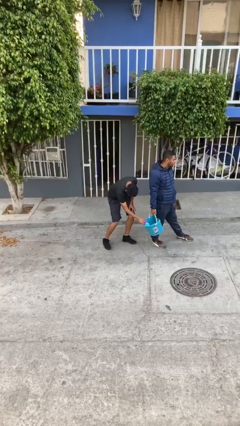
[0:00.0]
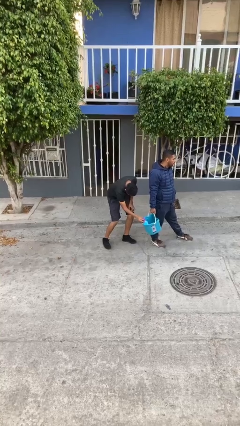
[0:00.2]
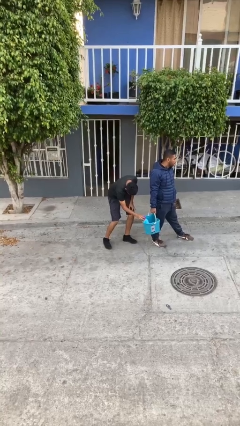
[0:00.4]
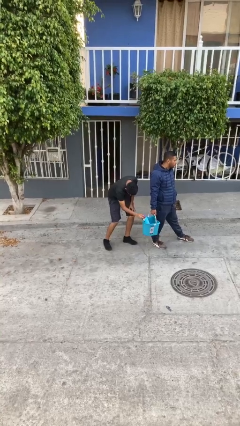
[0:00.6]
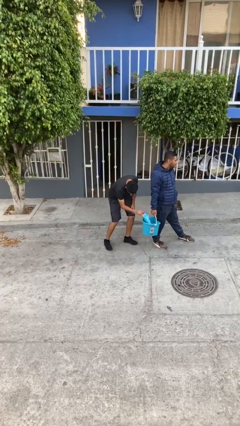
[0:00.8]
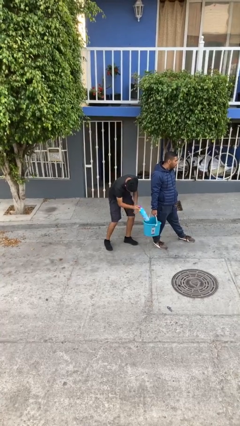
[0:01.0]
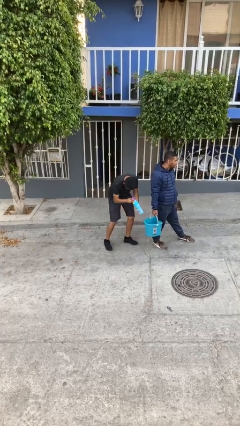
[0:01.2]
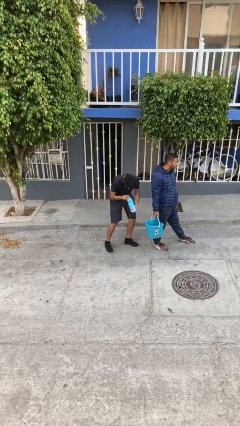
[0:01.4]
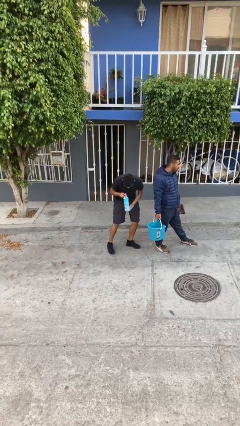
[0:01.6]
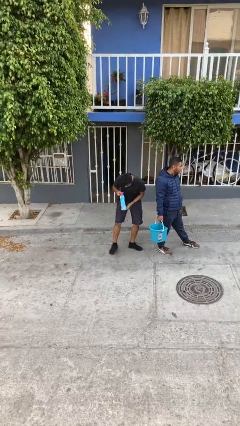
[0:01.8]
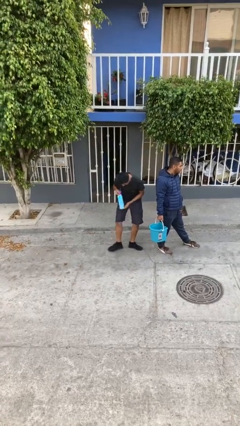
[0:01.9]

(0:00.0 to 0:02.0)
person steals object from person

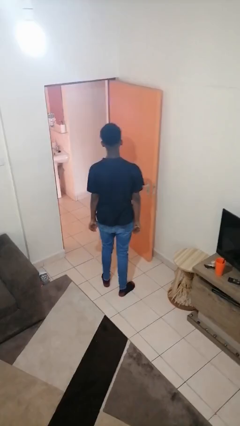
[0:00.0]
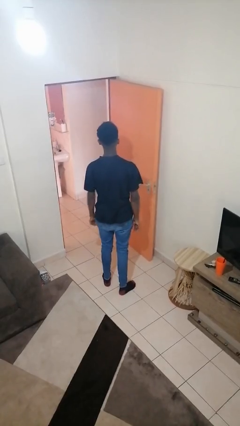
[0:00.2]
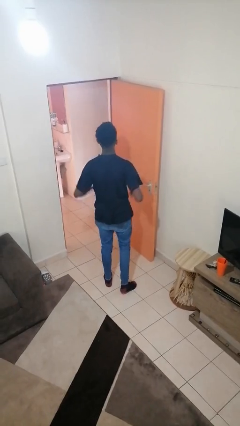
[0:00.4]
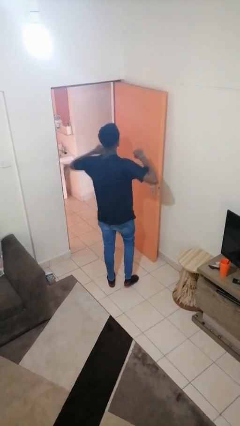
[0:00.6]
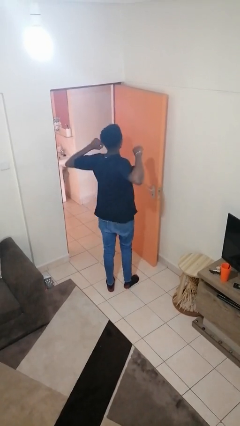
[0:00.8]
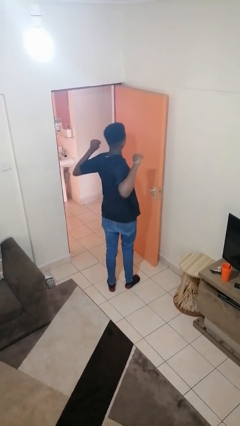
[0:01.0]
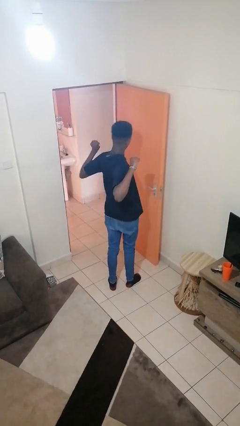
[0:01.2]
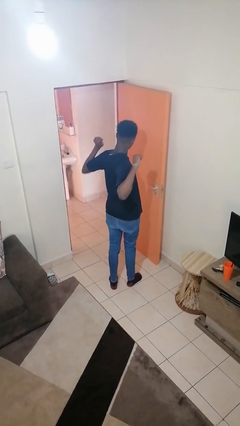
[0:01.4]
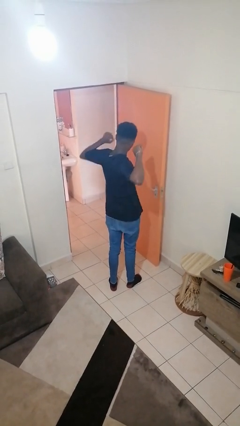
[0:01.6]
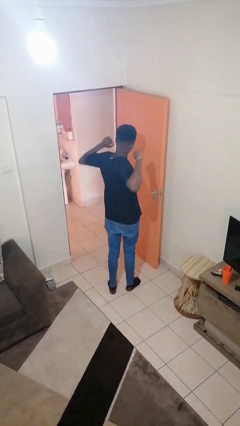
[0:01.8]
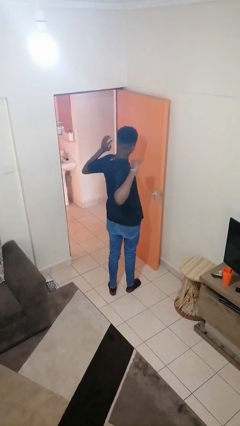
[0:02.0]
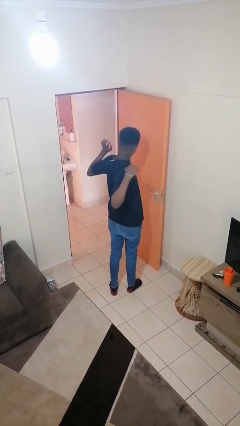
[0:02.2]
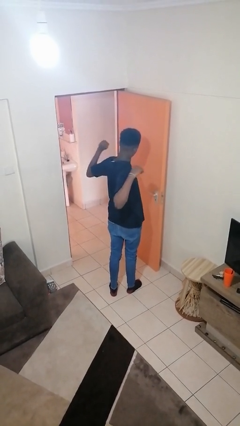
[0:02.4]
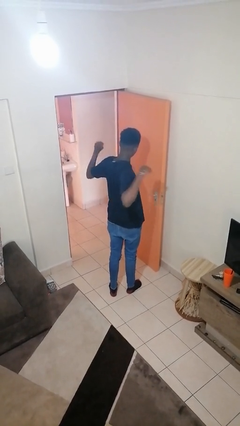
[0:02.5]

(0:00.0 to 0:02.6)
person stretches arms to side

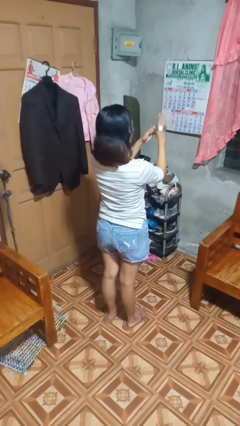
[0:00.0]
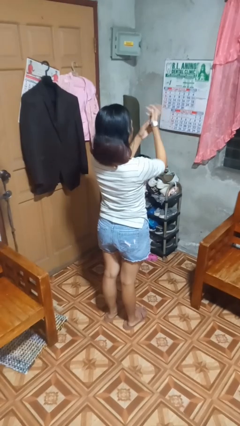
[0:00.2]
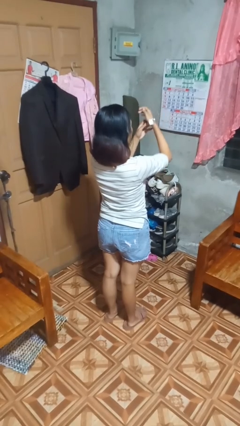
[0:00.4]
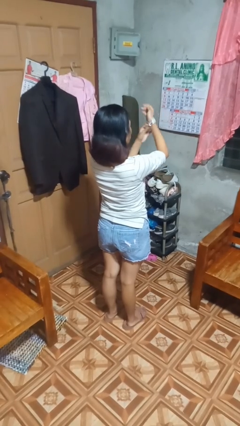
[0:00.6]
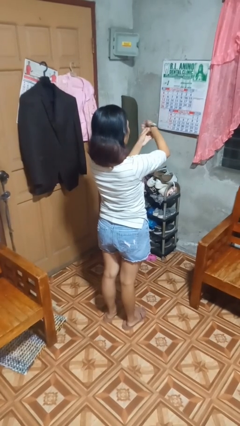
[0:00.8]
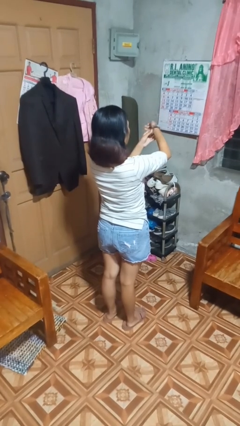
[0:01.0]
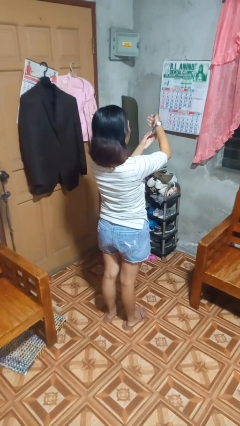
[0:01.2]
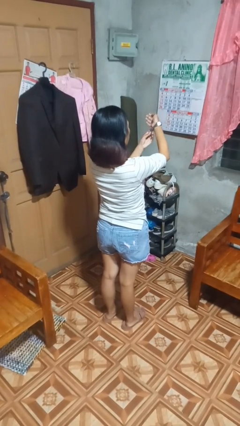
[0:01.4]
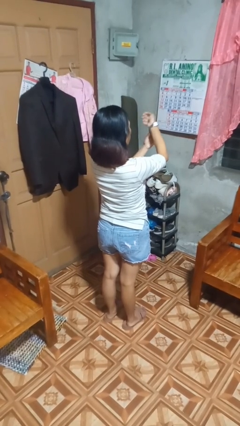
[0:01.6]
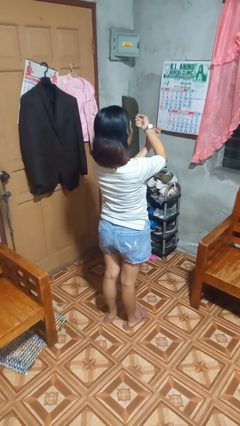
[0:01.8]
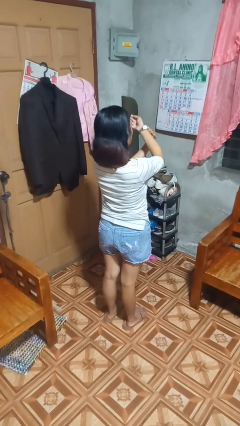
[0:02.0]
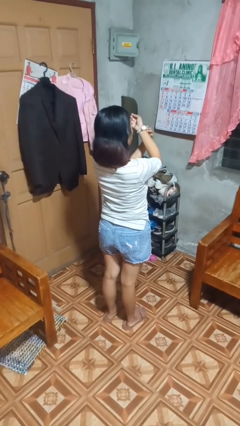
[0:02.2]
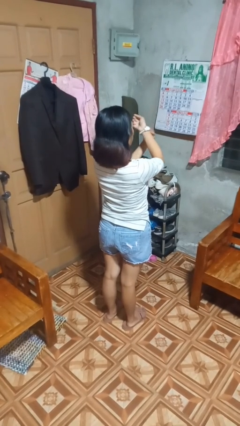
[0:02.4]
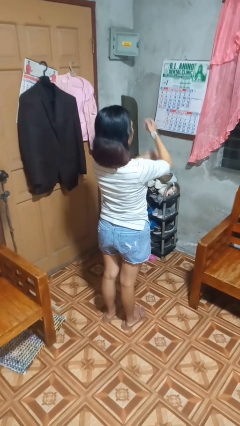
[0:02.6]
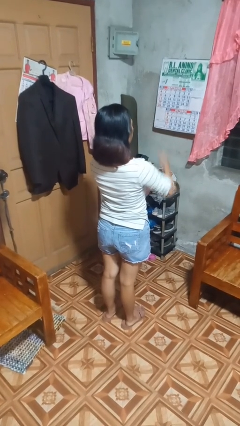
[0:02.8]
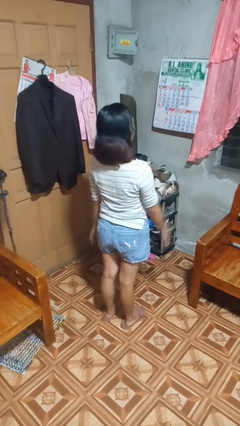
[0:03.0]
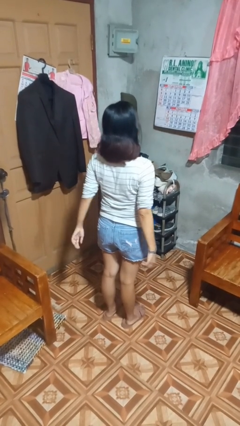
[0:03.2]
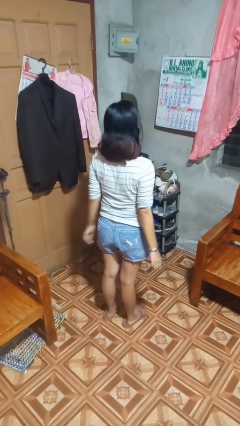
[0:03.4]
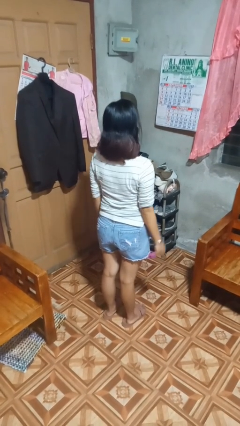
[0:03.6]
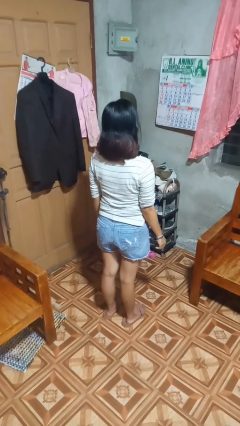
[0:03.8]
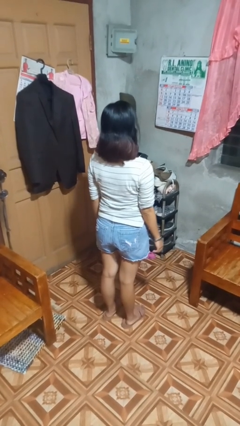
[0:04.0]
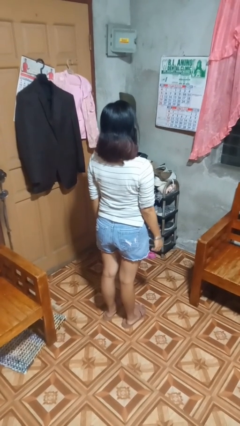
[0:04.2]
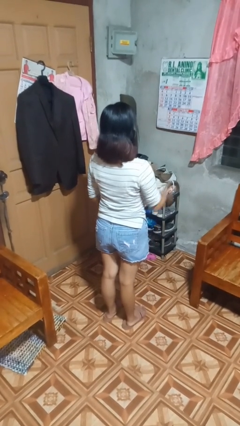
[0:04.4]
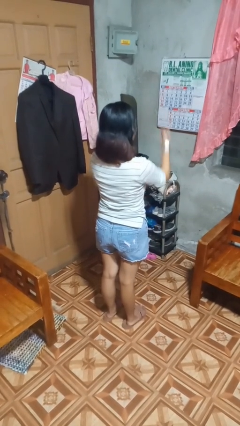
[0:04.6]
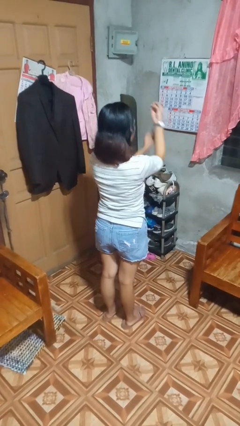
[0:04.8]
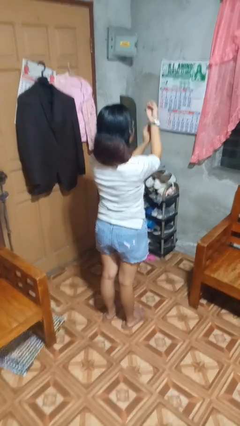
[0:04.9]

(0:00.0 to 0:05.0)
person puts on wristwatch

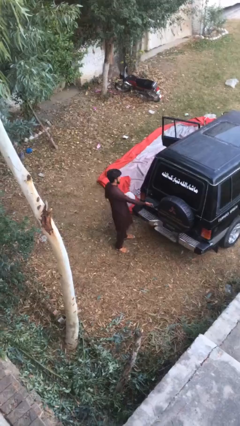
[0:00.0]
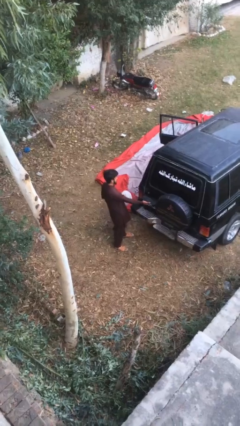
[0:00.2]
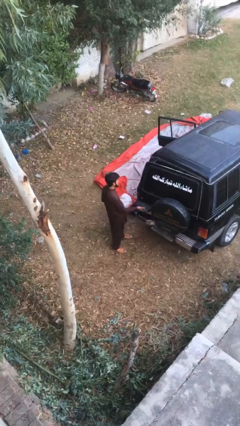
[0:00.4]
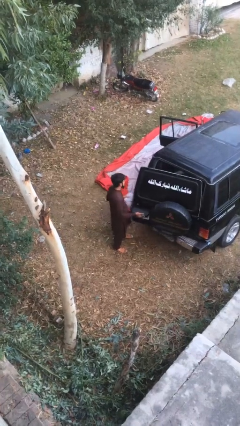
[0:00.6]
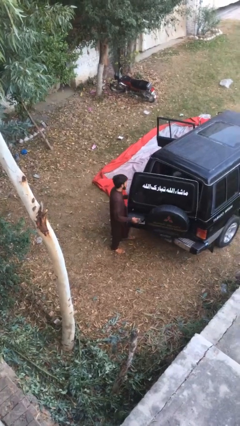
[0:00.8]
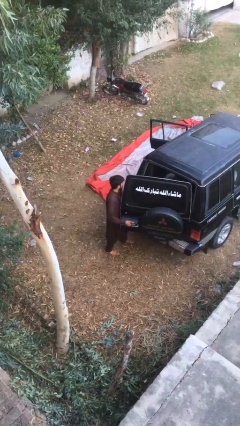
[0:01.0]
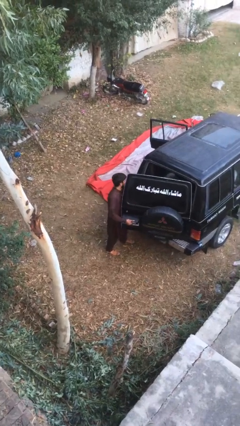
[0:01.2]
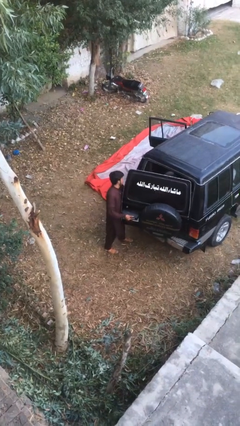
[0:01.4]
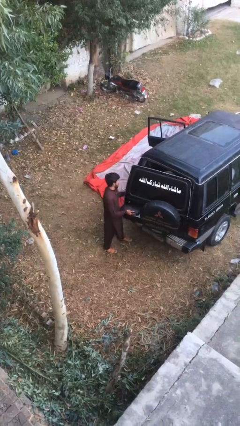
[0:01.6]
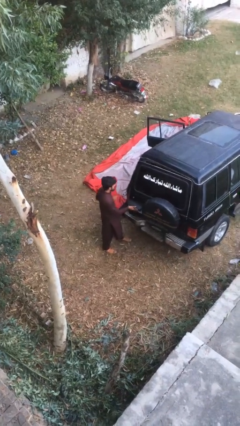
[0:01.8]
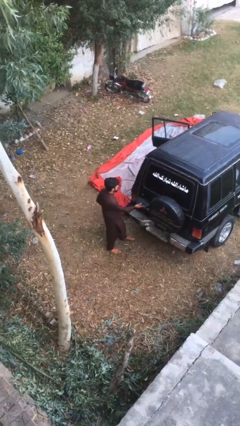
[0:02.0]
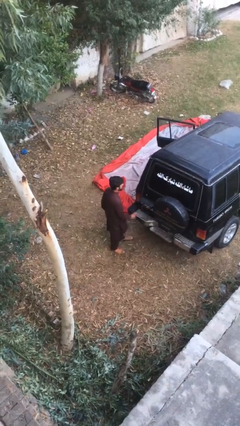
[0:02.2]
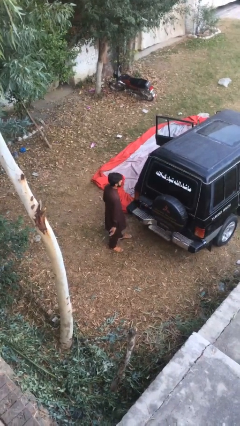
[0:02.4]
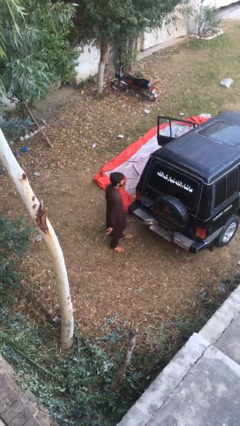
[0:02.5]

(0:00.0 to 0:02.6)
person loads car

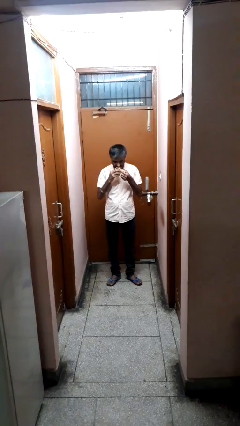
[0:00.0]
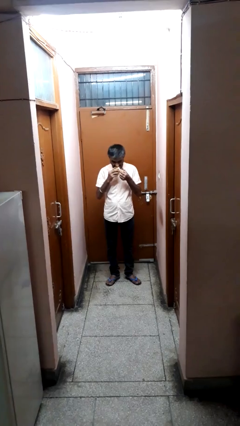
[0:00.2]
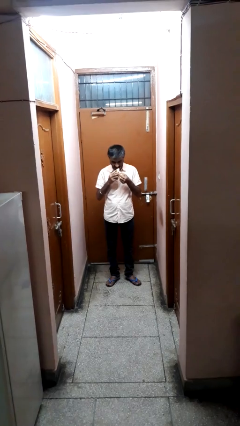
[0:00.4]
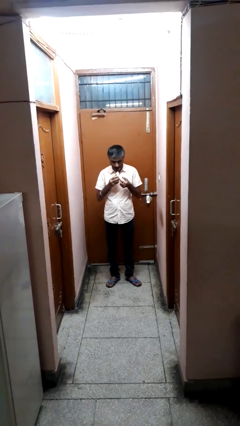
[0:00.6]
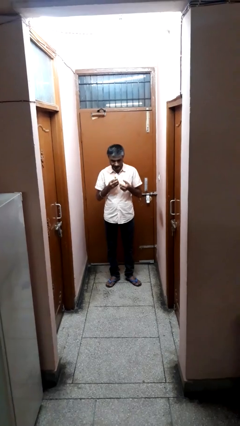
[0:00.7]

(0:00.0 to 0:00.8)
person eats banana

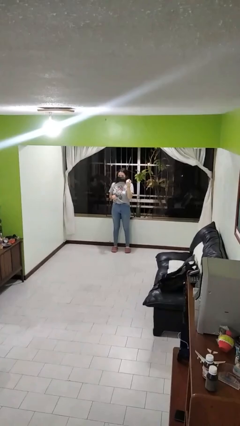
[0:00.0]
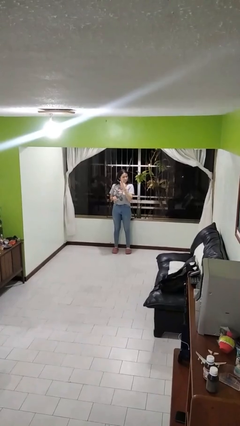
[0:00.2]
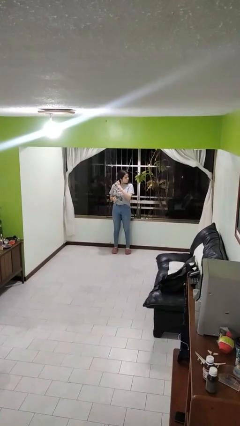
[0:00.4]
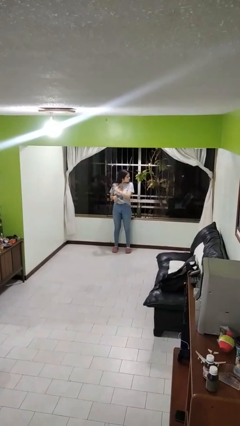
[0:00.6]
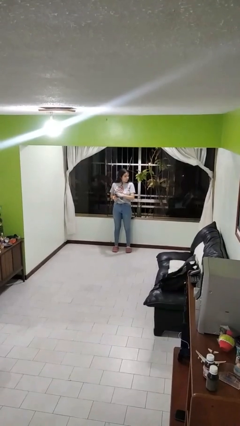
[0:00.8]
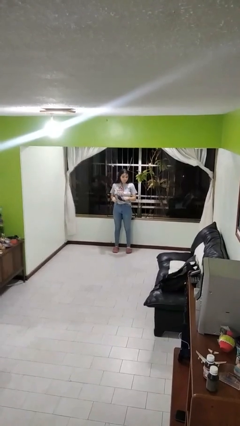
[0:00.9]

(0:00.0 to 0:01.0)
person takes off facemask

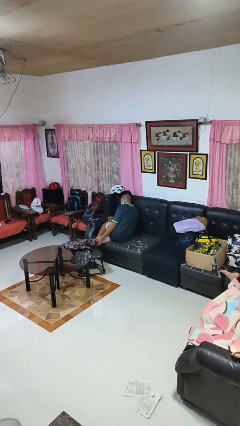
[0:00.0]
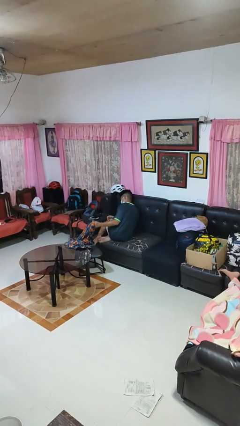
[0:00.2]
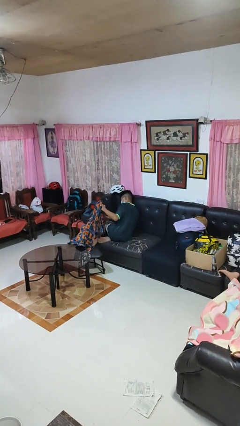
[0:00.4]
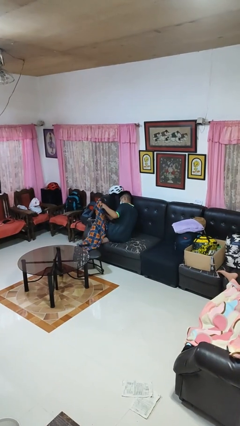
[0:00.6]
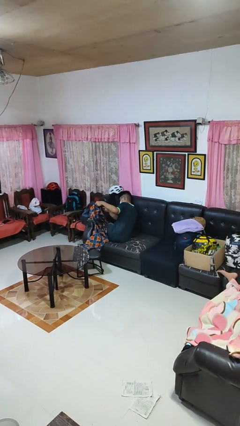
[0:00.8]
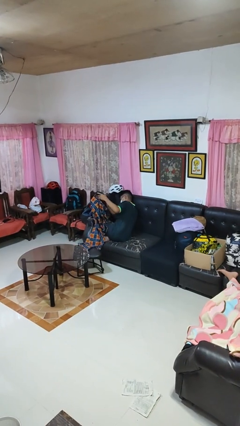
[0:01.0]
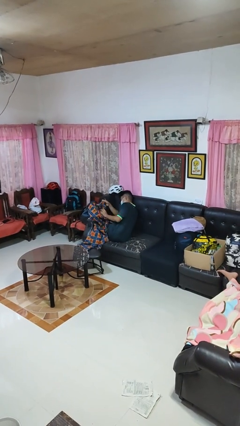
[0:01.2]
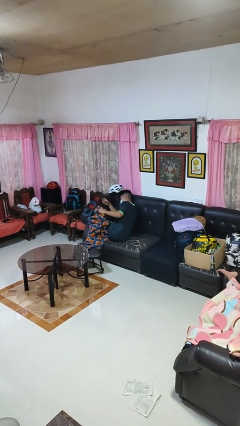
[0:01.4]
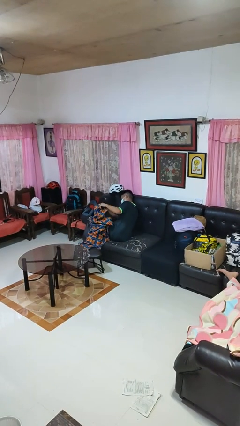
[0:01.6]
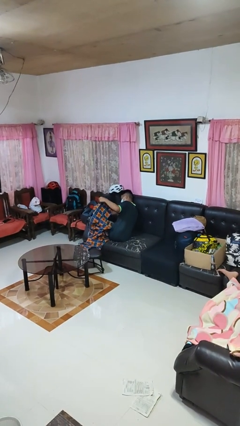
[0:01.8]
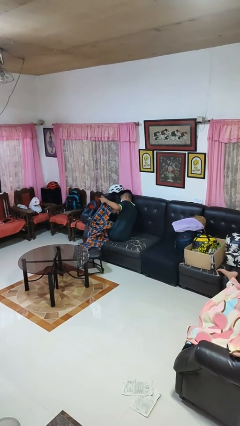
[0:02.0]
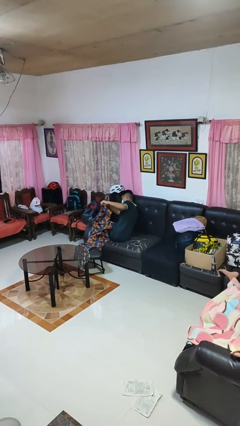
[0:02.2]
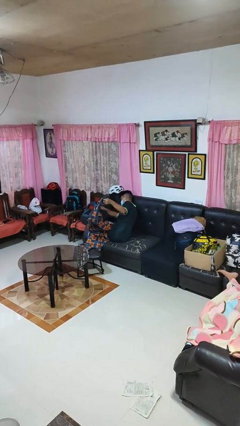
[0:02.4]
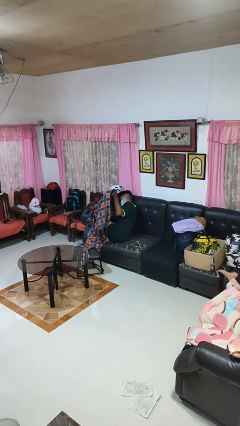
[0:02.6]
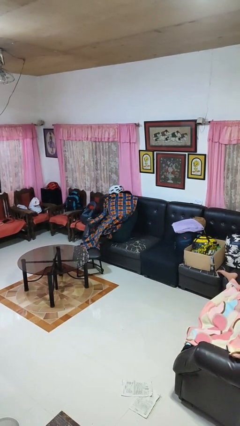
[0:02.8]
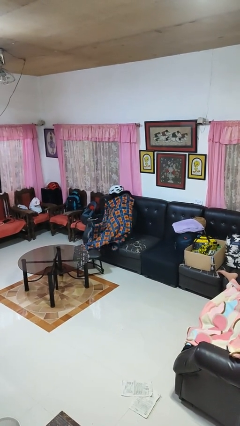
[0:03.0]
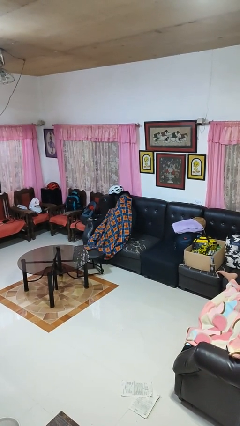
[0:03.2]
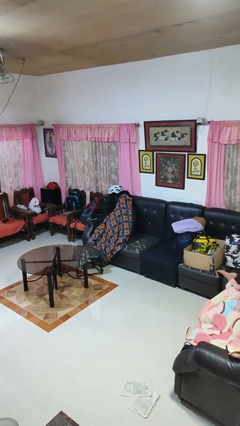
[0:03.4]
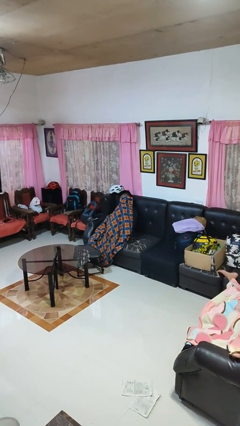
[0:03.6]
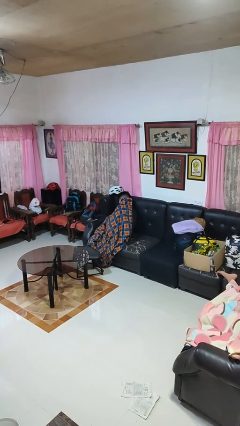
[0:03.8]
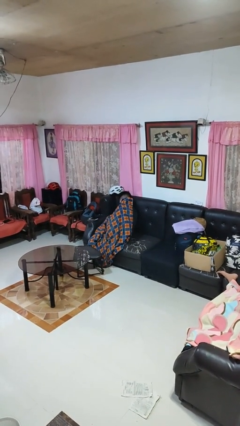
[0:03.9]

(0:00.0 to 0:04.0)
person covers with blanket
